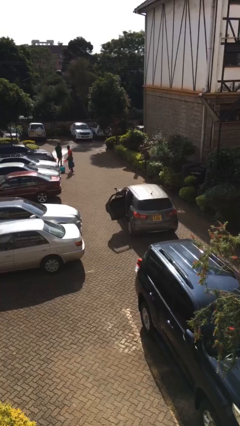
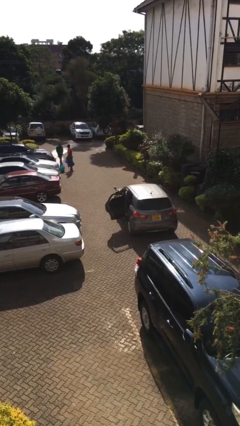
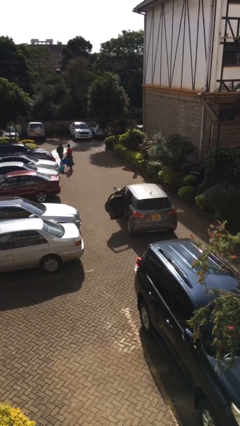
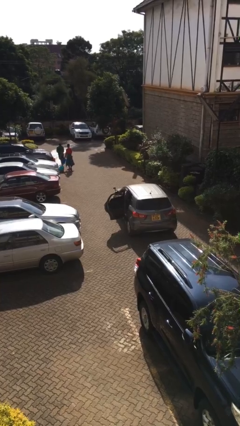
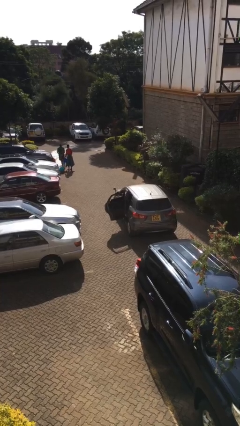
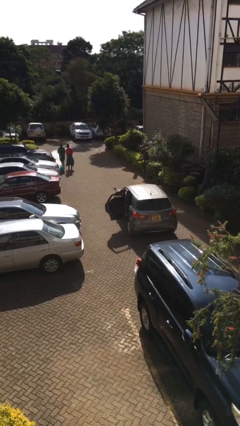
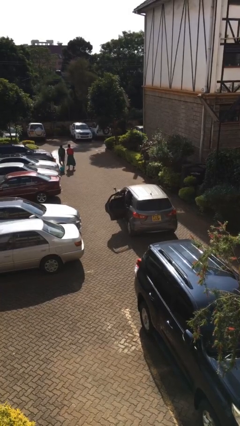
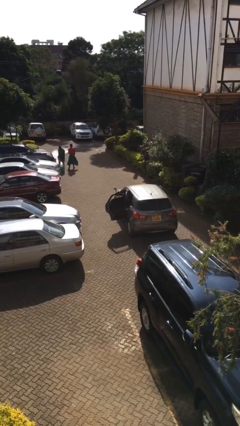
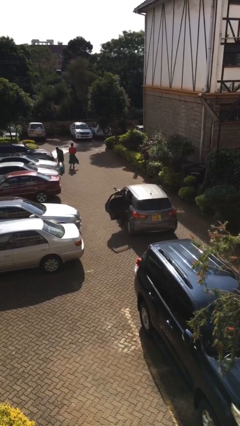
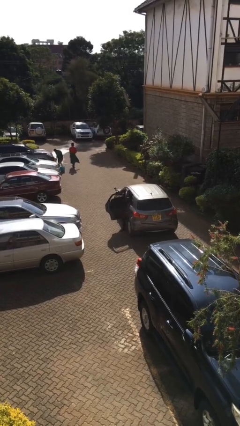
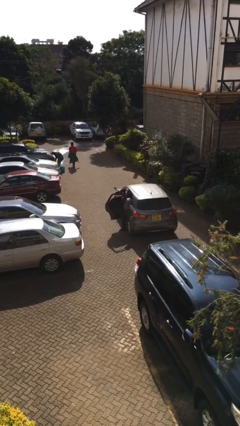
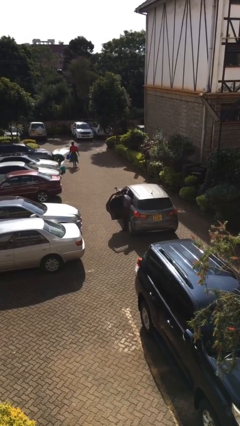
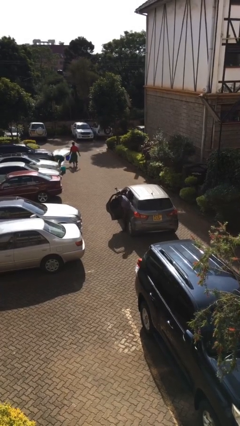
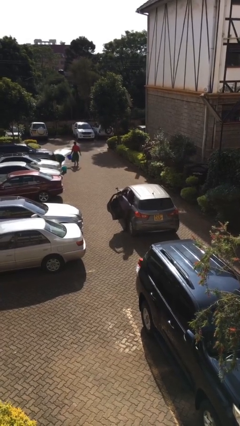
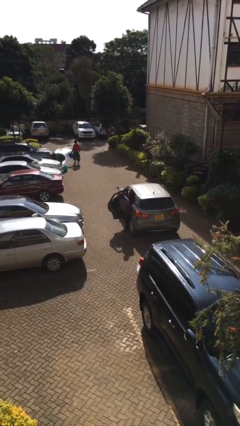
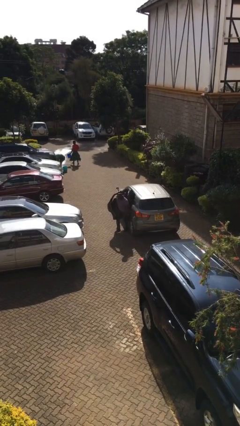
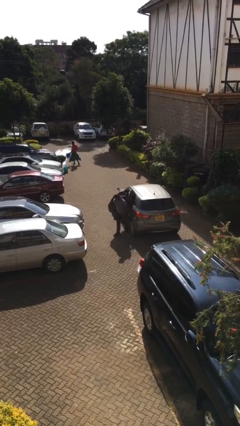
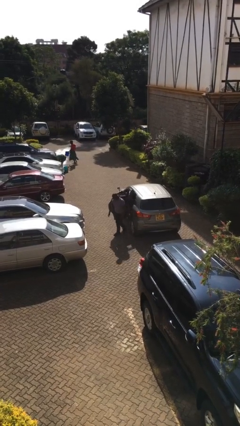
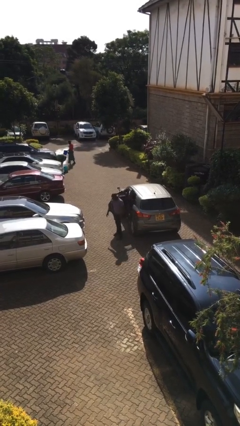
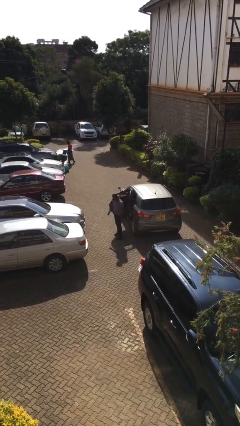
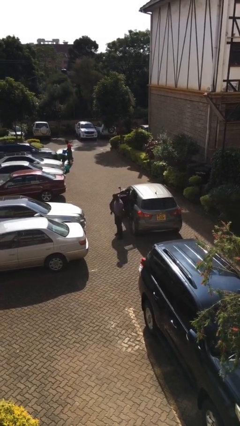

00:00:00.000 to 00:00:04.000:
person exits car

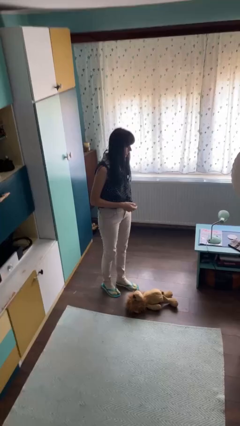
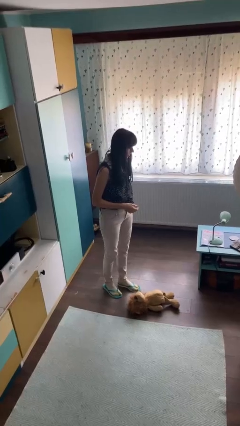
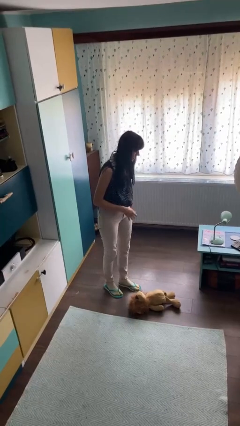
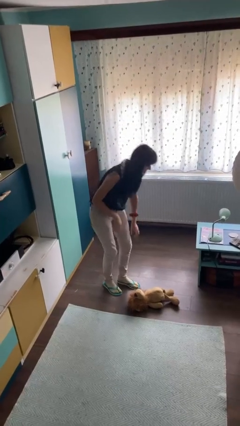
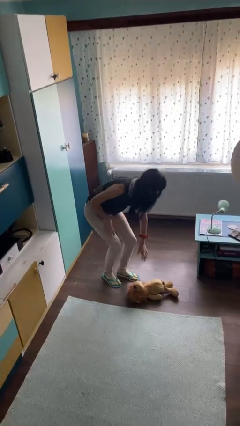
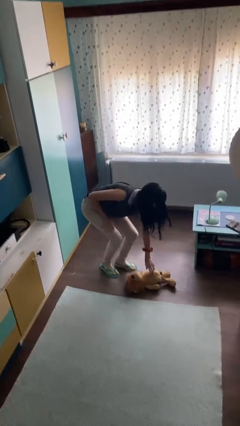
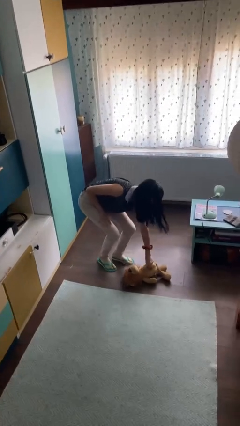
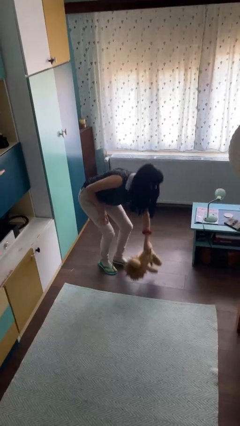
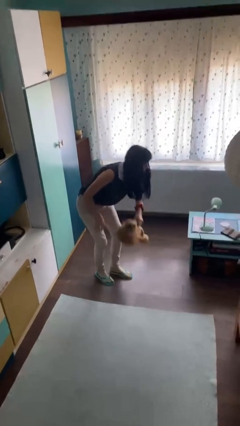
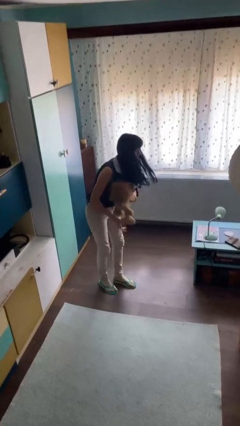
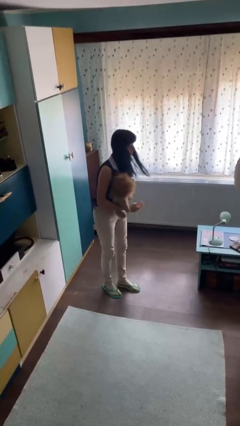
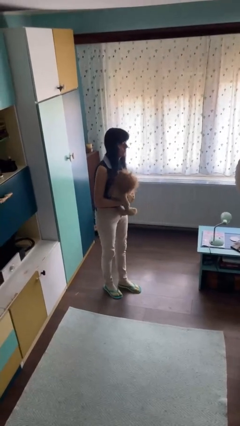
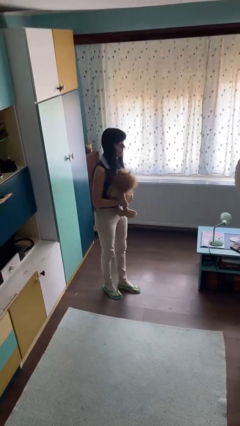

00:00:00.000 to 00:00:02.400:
person picks up object from floor

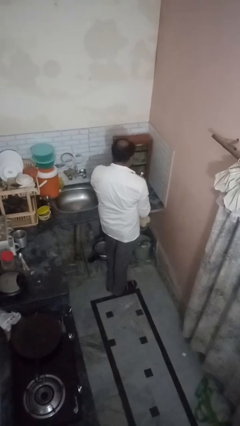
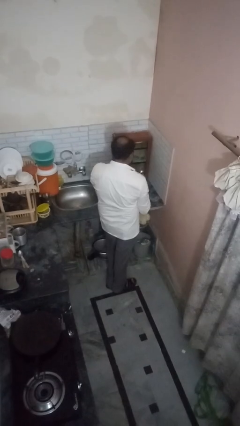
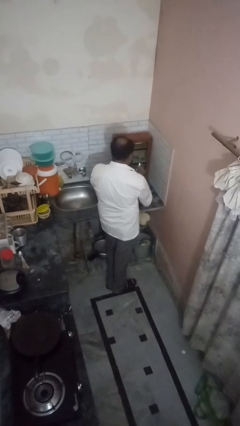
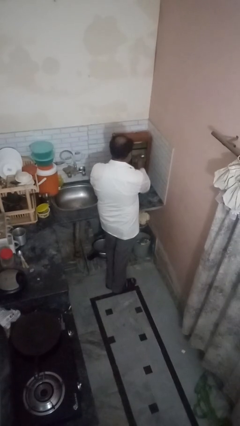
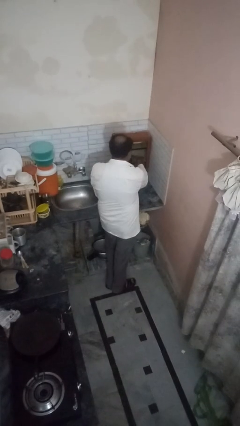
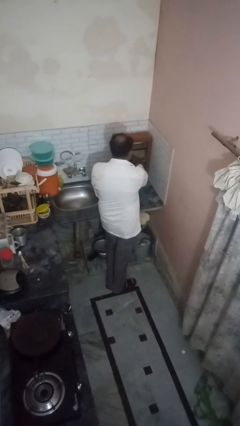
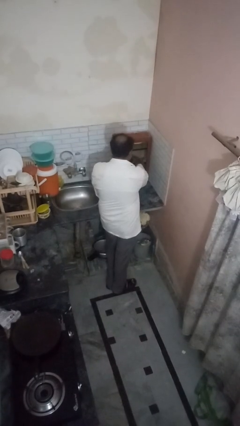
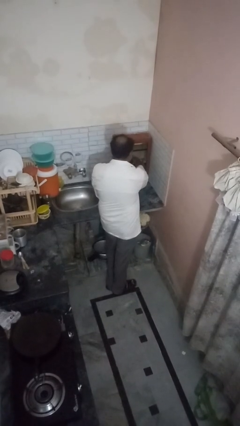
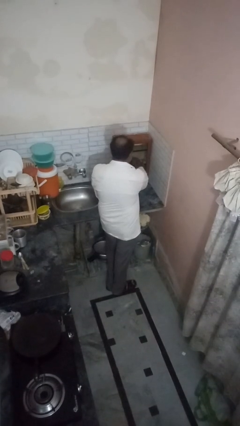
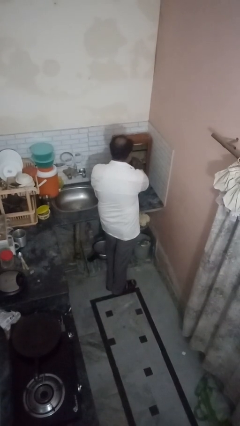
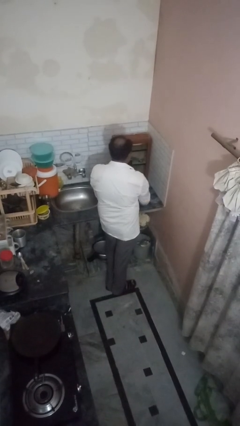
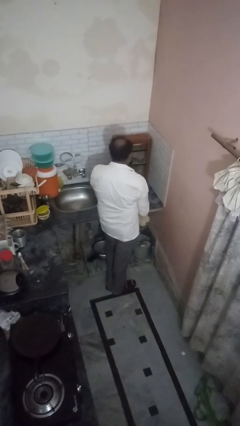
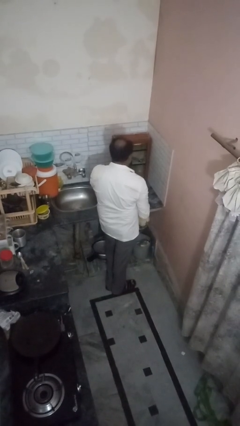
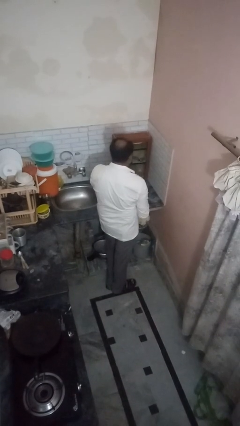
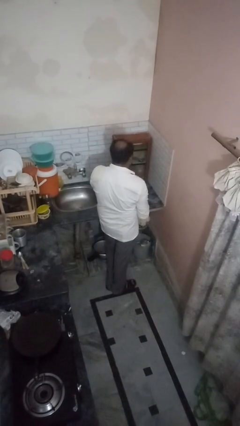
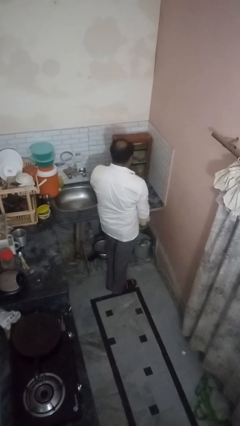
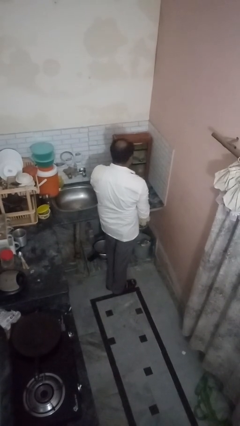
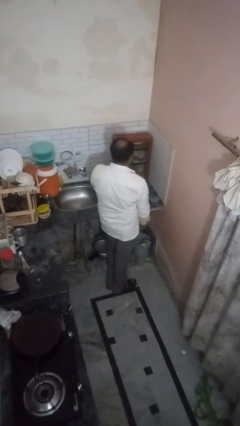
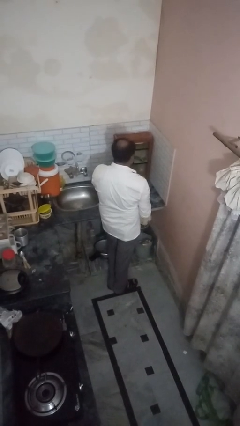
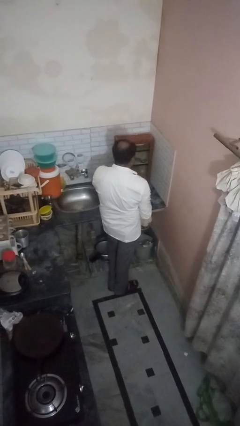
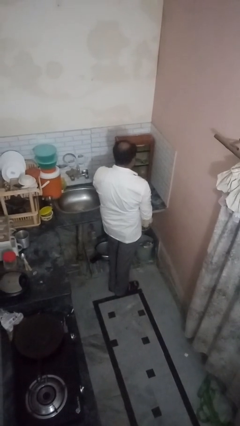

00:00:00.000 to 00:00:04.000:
person puts object into kitchen drawer

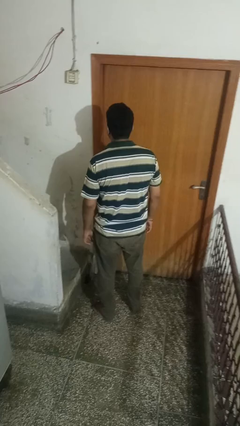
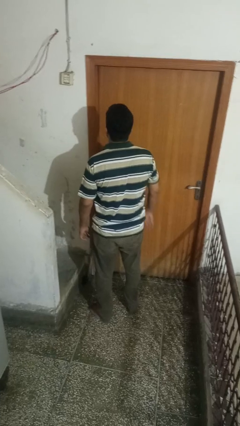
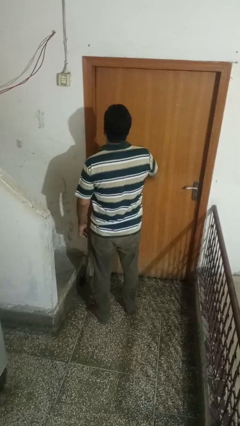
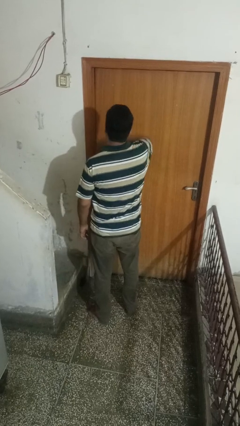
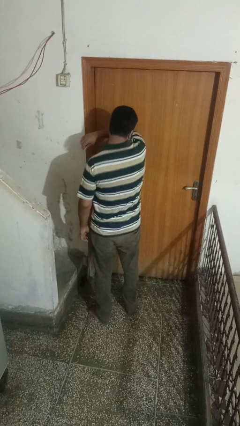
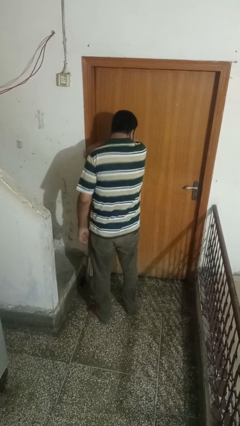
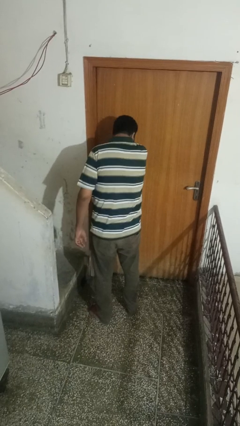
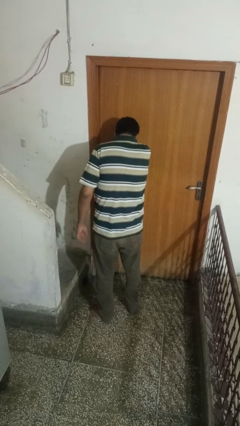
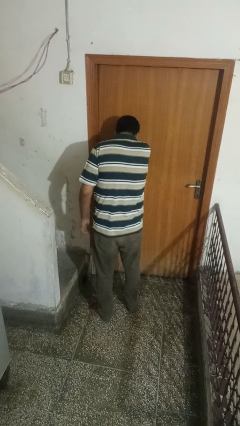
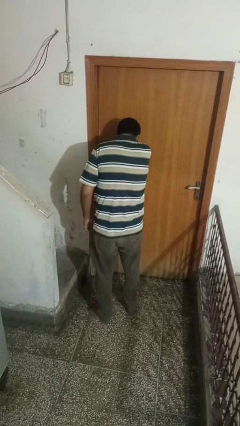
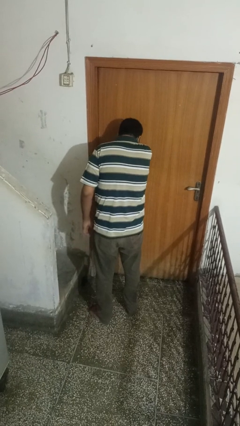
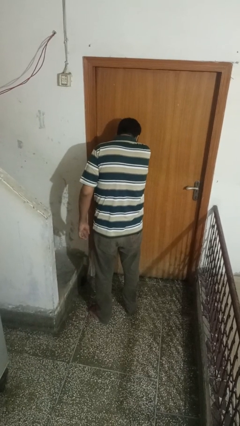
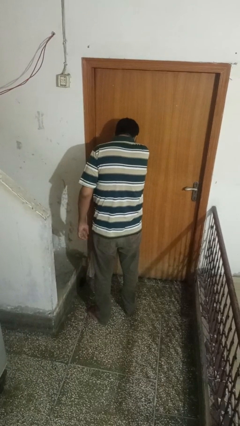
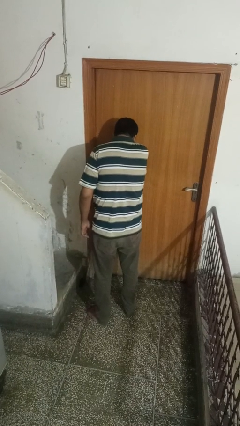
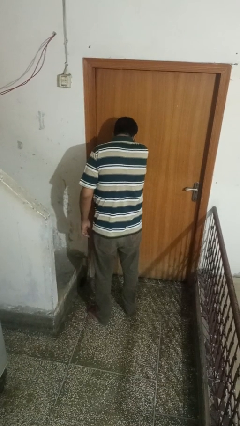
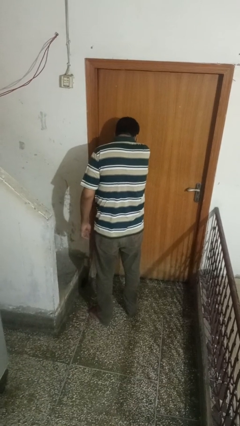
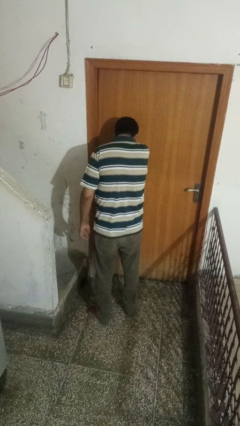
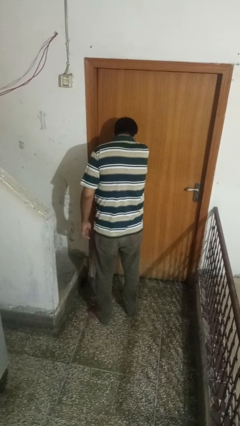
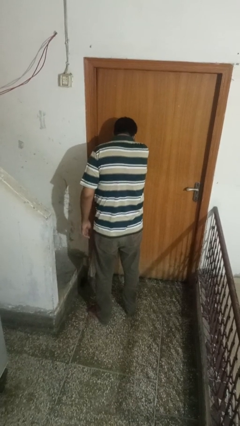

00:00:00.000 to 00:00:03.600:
person sneezes into arm

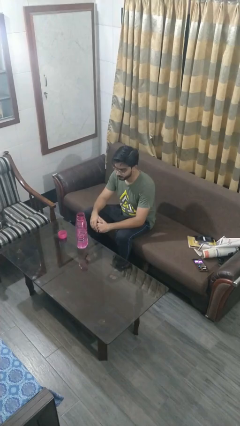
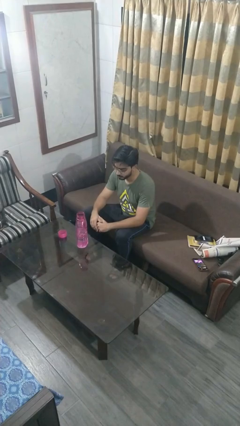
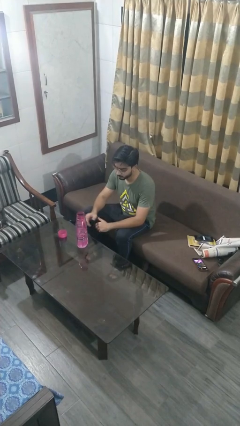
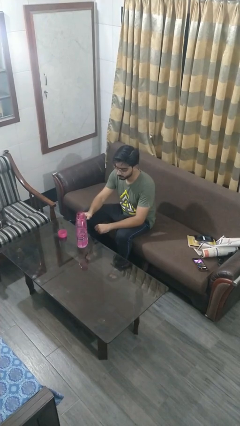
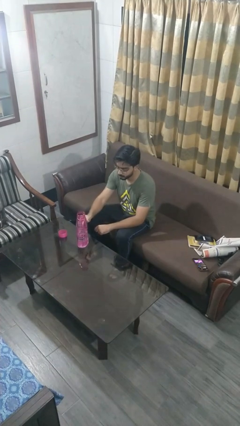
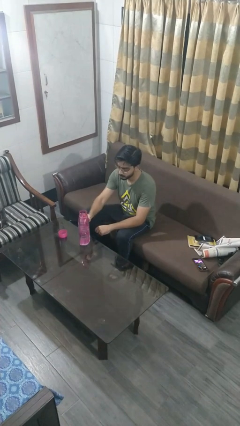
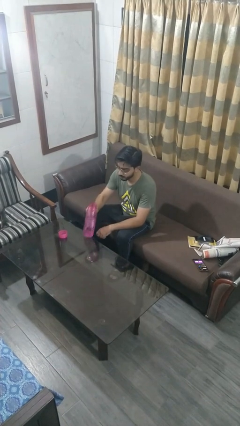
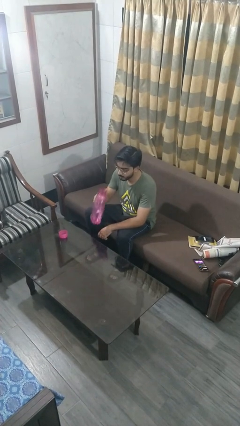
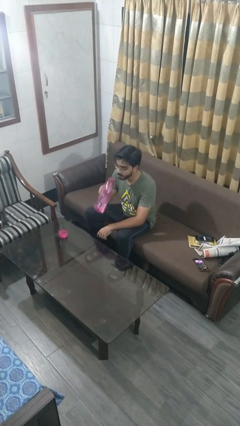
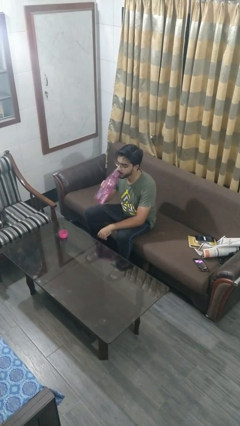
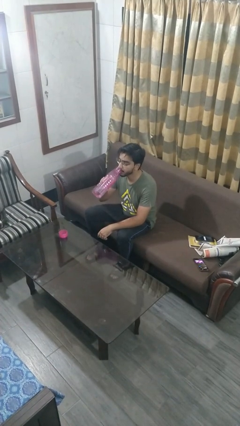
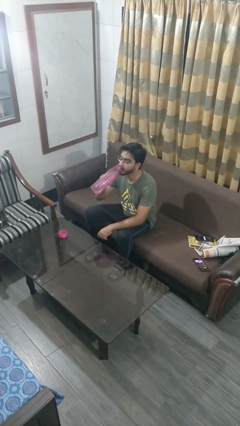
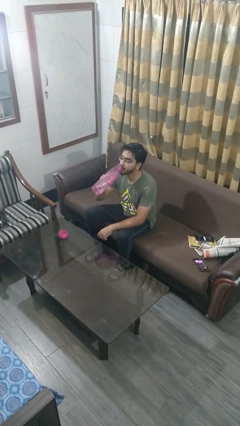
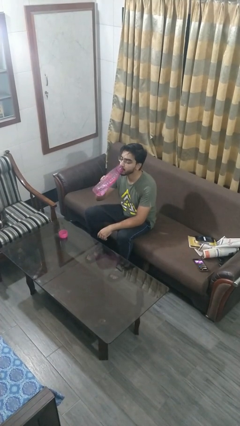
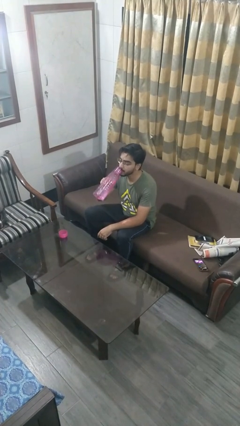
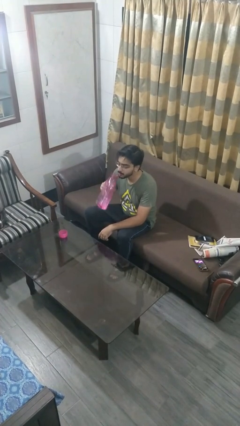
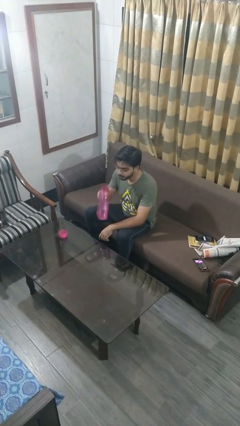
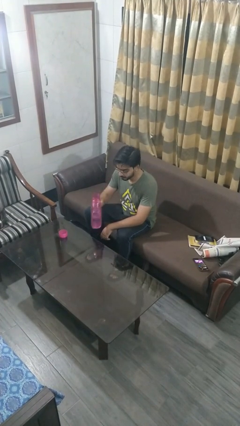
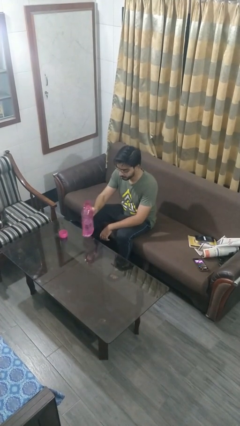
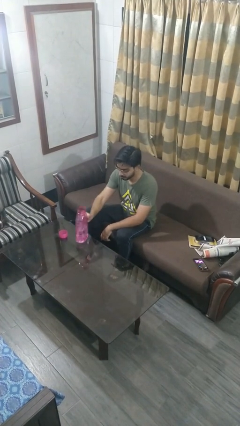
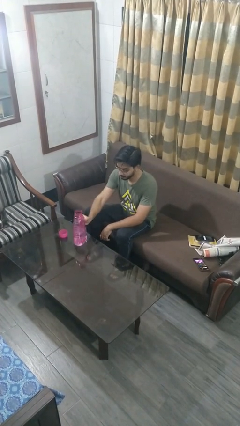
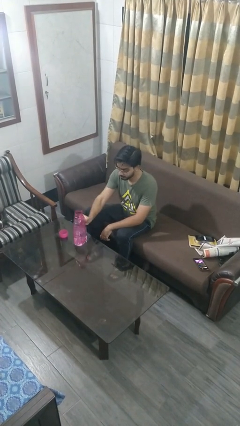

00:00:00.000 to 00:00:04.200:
person drinks from bottle
